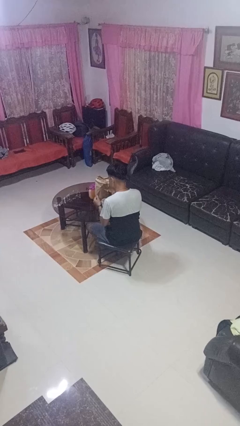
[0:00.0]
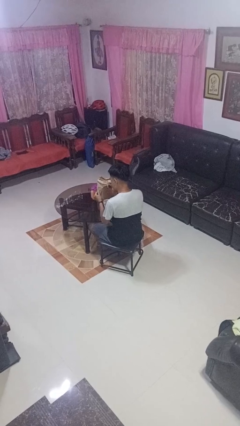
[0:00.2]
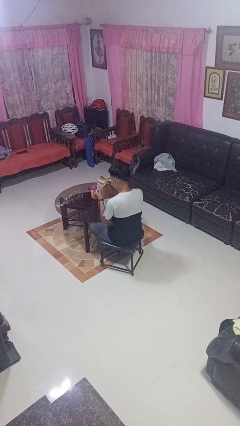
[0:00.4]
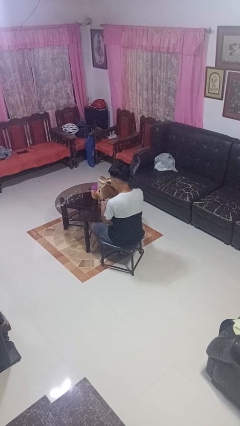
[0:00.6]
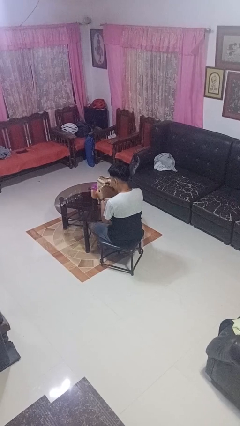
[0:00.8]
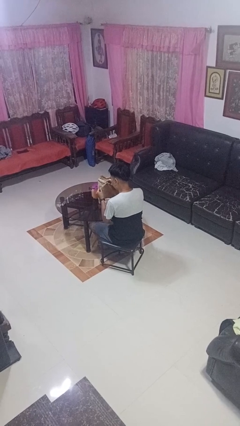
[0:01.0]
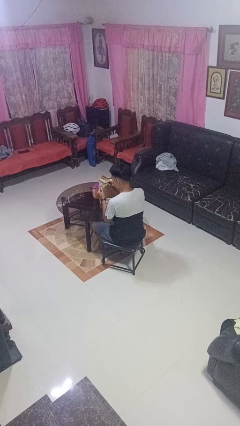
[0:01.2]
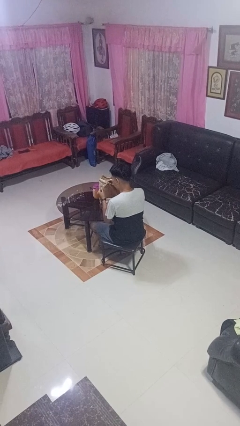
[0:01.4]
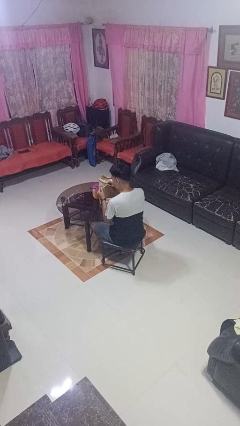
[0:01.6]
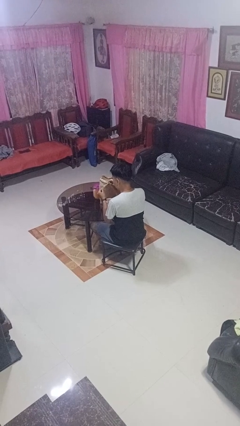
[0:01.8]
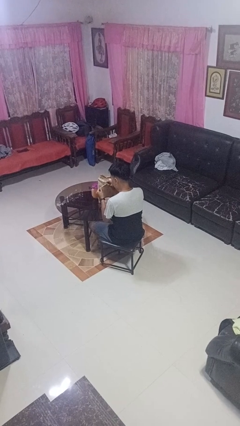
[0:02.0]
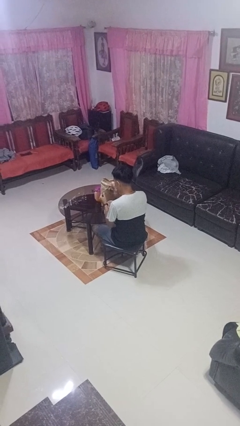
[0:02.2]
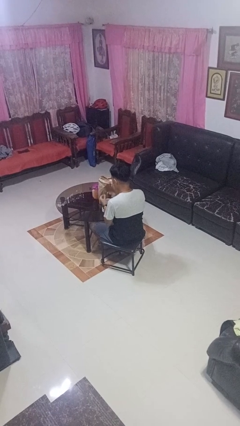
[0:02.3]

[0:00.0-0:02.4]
person paints fingernails

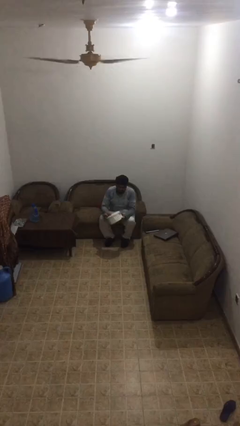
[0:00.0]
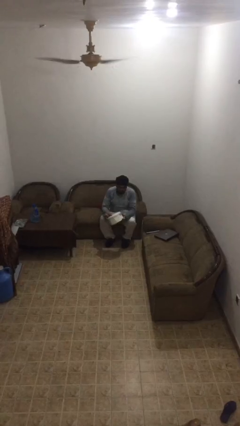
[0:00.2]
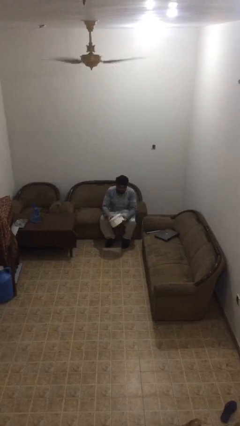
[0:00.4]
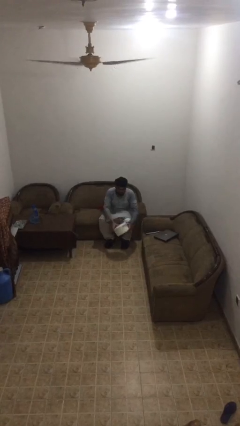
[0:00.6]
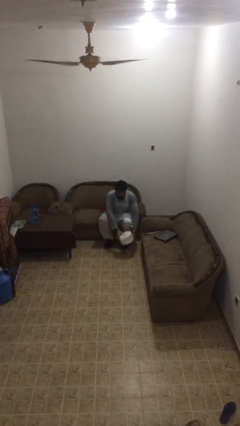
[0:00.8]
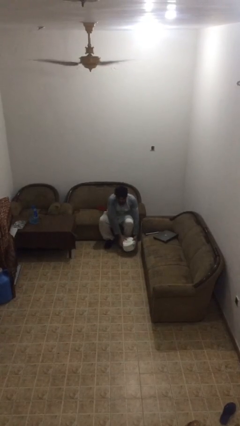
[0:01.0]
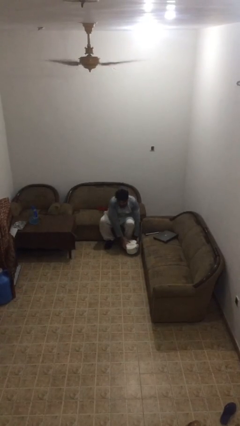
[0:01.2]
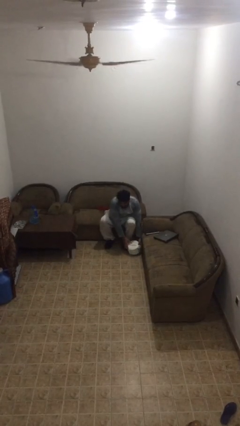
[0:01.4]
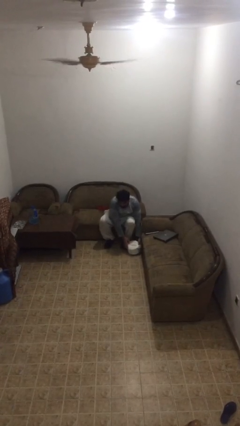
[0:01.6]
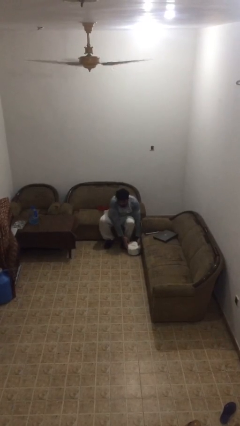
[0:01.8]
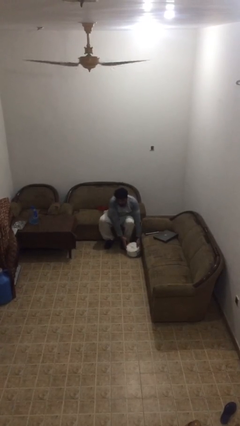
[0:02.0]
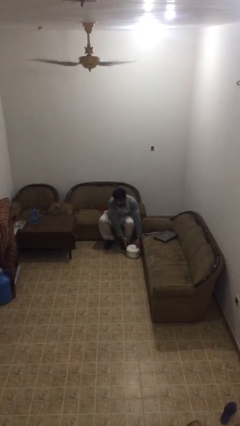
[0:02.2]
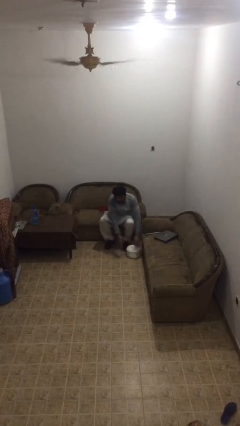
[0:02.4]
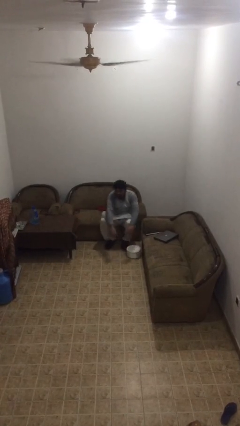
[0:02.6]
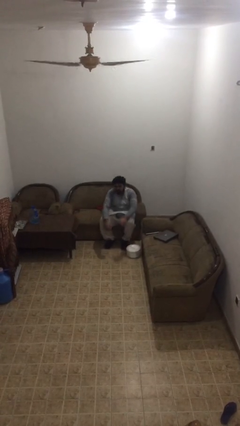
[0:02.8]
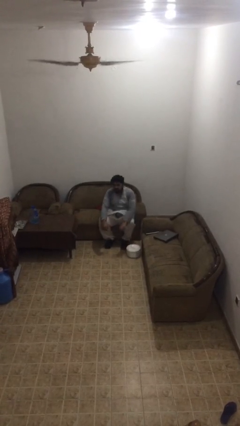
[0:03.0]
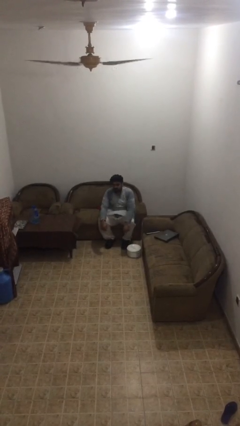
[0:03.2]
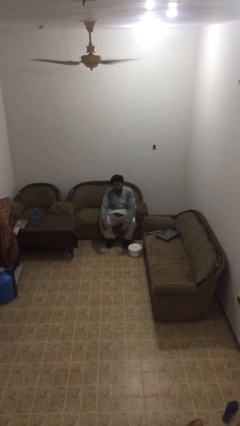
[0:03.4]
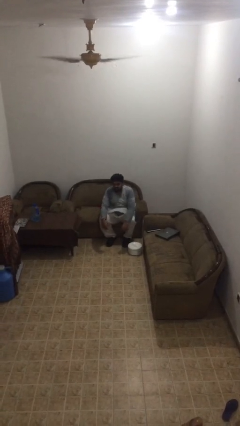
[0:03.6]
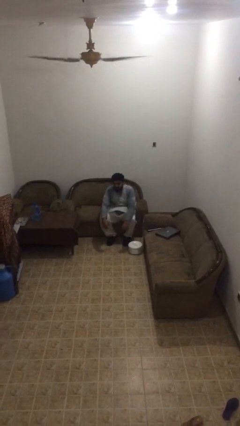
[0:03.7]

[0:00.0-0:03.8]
person puts down object on floor

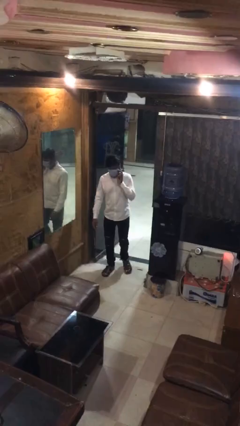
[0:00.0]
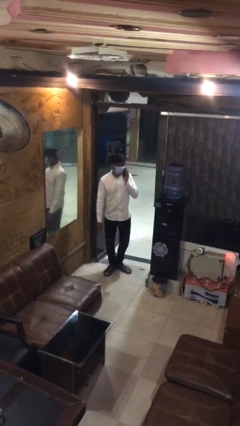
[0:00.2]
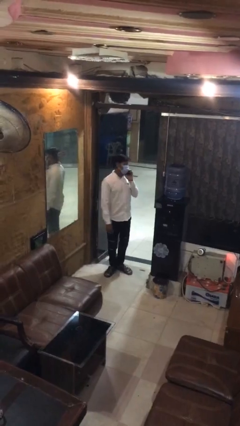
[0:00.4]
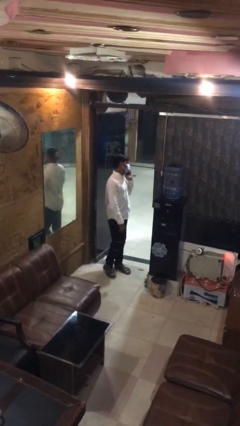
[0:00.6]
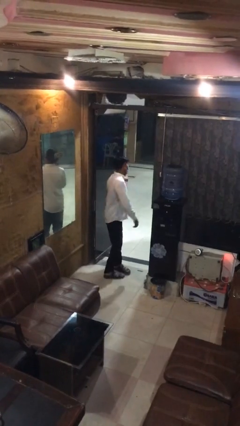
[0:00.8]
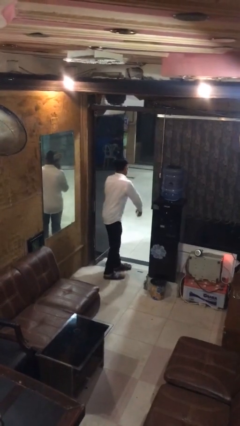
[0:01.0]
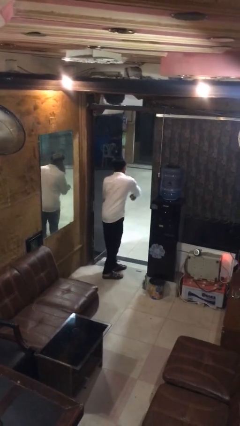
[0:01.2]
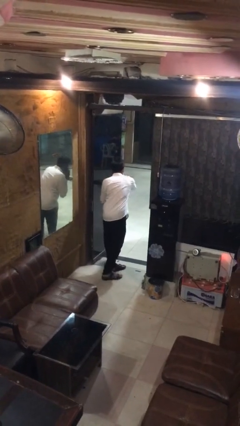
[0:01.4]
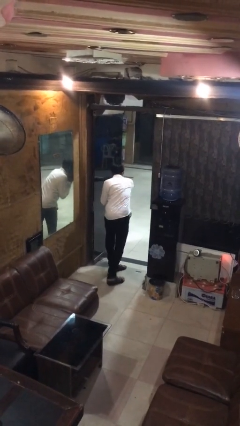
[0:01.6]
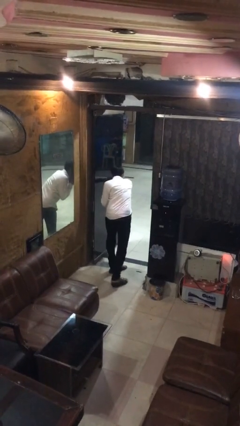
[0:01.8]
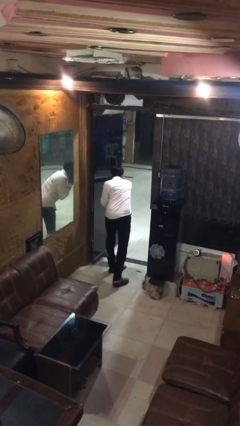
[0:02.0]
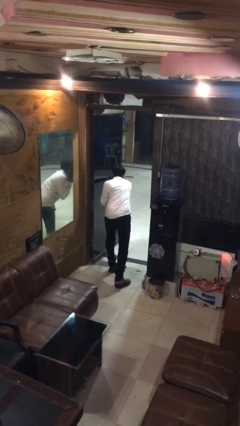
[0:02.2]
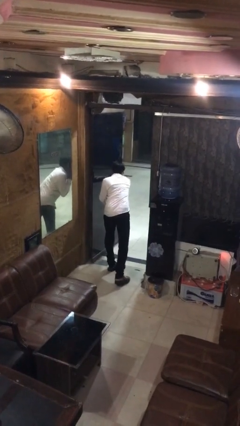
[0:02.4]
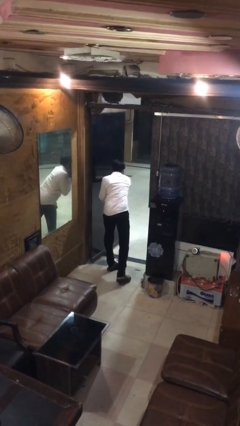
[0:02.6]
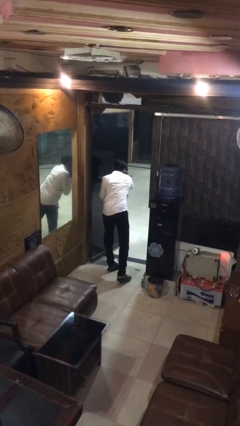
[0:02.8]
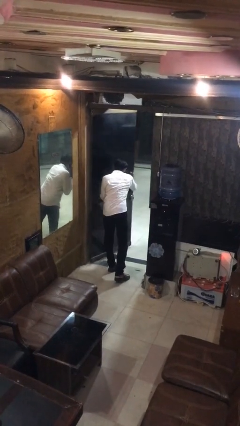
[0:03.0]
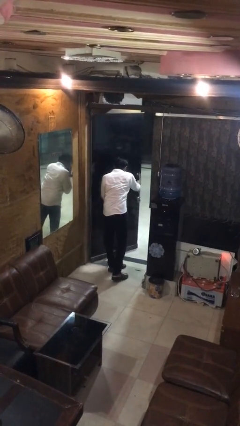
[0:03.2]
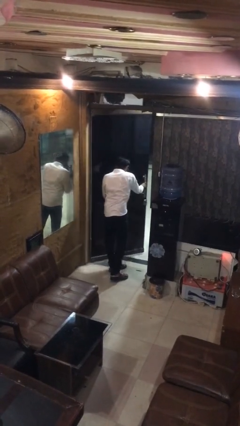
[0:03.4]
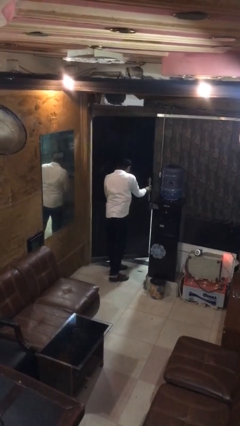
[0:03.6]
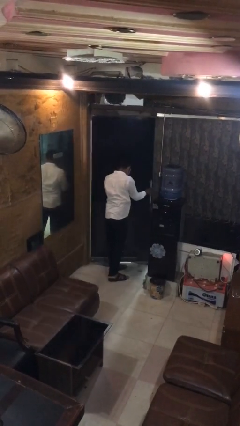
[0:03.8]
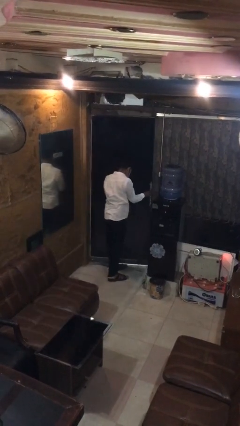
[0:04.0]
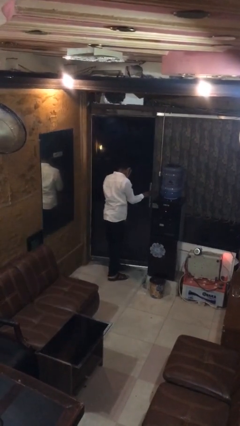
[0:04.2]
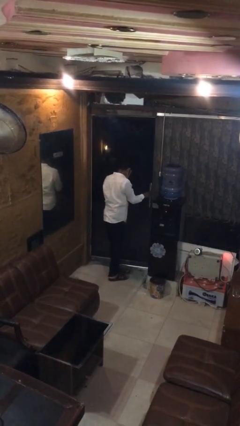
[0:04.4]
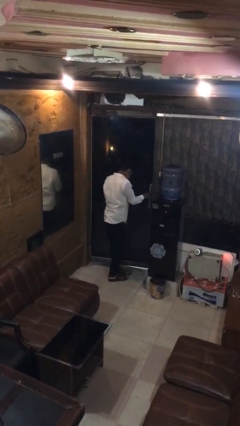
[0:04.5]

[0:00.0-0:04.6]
person closes facility door

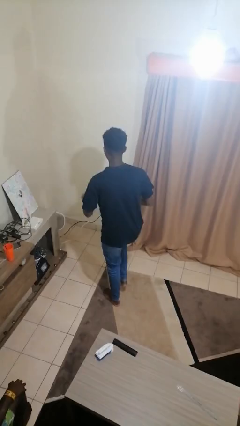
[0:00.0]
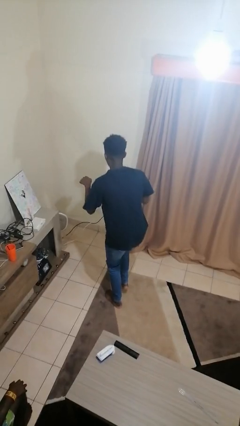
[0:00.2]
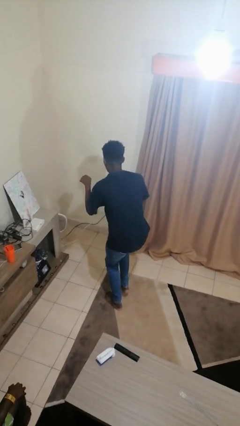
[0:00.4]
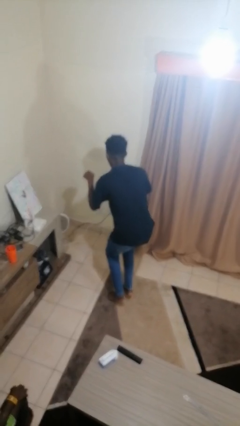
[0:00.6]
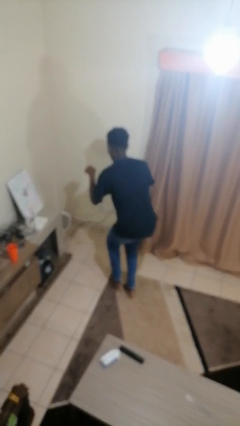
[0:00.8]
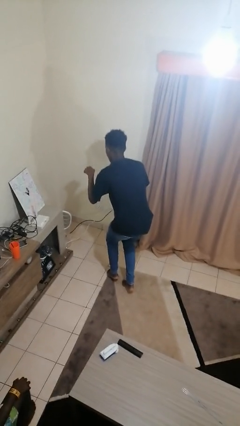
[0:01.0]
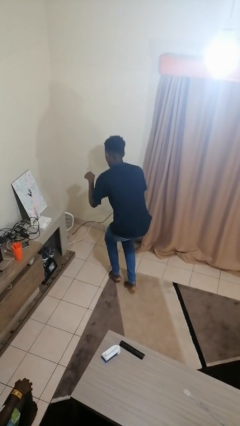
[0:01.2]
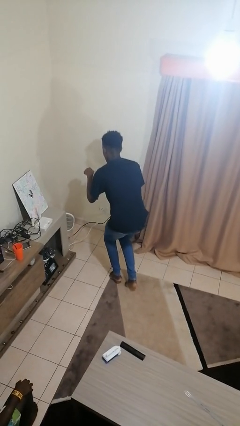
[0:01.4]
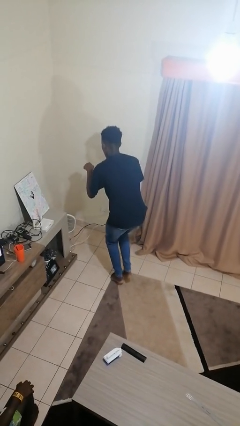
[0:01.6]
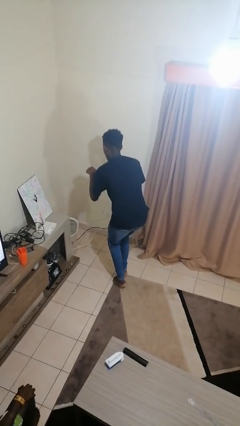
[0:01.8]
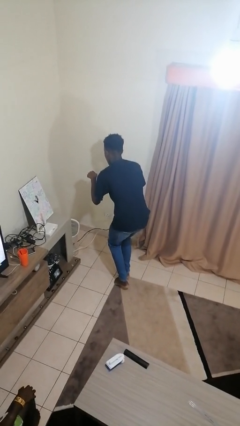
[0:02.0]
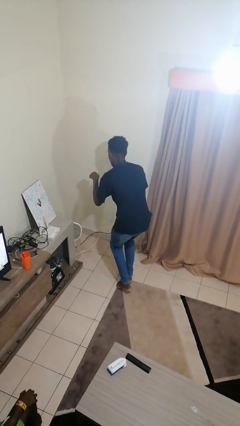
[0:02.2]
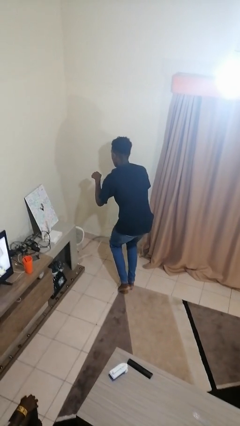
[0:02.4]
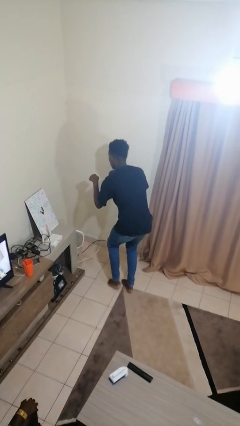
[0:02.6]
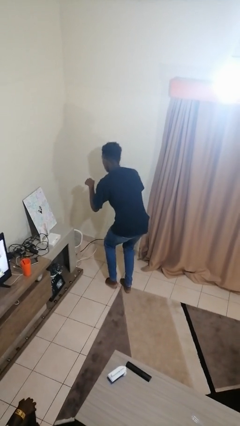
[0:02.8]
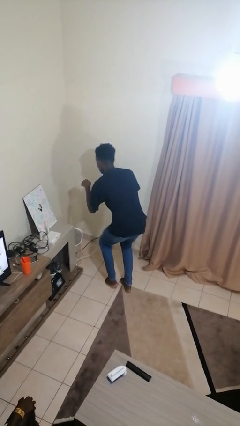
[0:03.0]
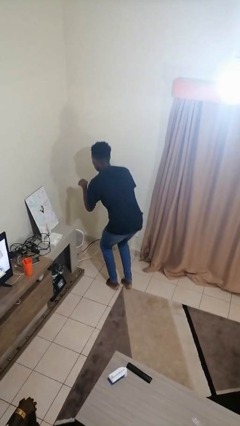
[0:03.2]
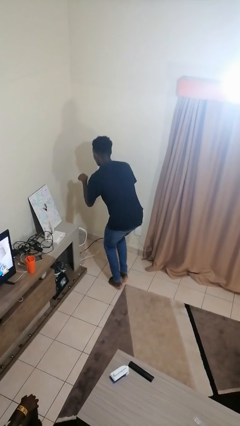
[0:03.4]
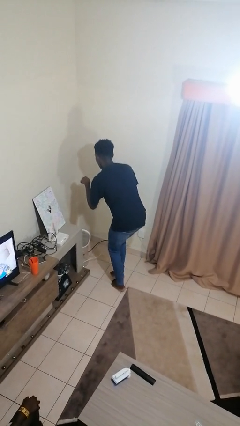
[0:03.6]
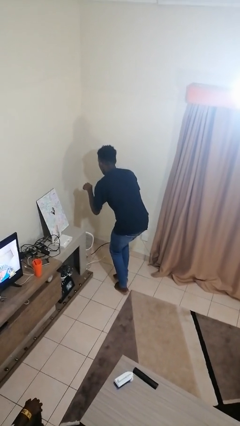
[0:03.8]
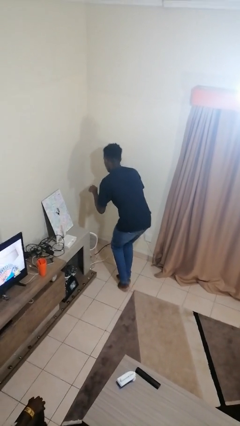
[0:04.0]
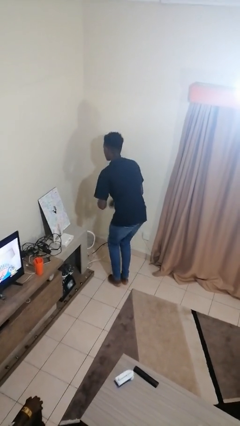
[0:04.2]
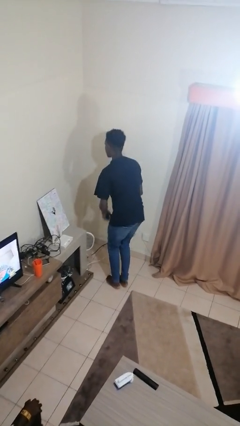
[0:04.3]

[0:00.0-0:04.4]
person walks tiptoe

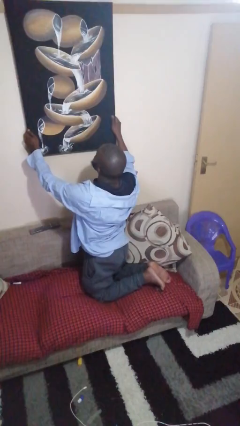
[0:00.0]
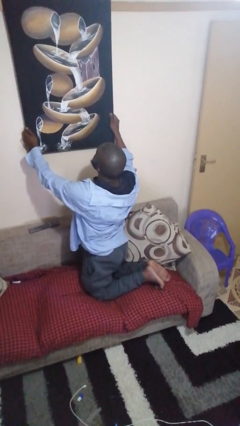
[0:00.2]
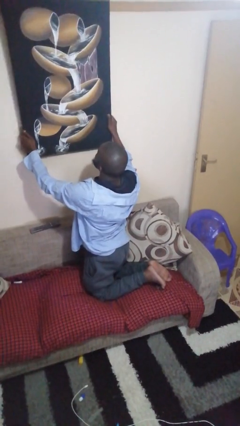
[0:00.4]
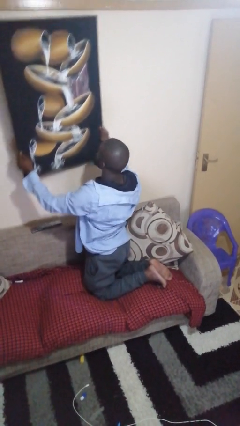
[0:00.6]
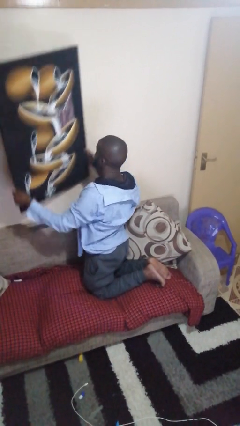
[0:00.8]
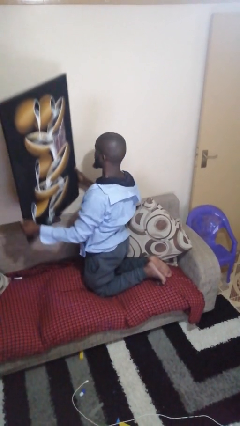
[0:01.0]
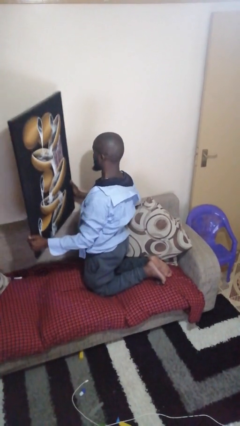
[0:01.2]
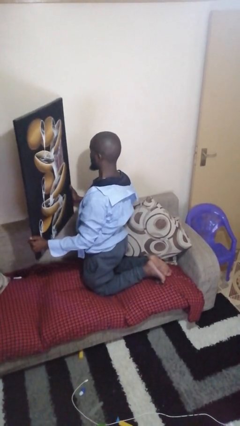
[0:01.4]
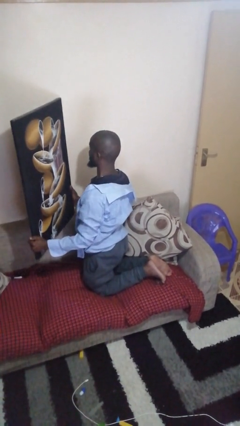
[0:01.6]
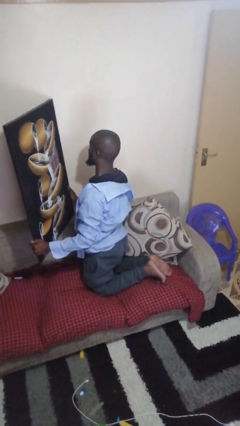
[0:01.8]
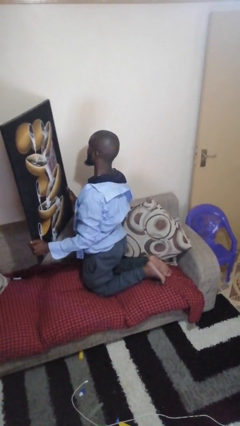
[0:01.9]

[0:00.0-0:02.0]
person takes down picture frame
